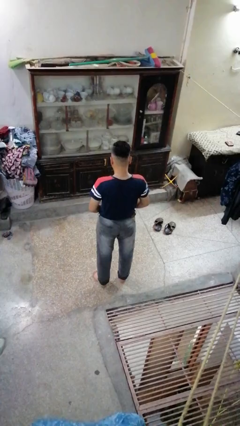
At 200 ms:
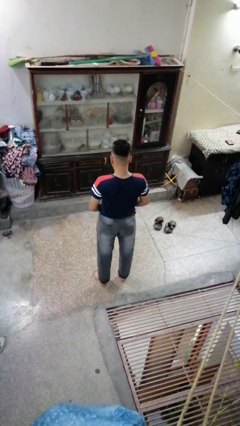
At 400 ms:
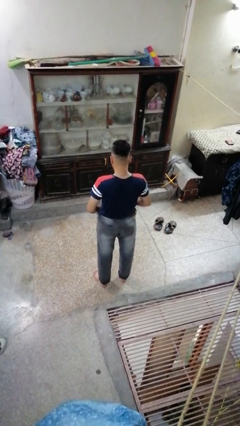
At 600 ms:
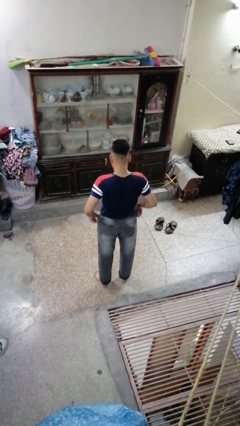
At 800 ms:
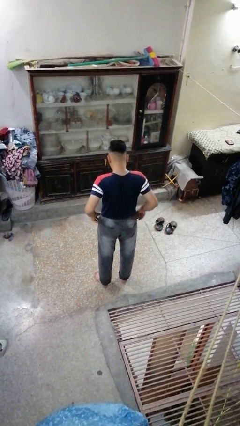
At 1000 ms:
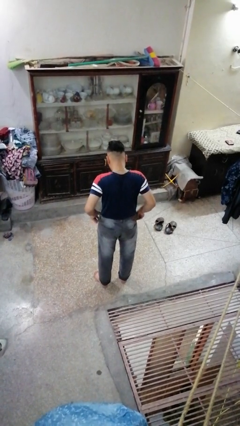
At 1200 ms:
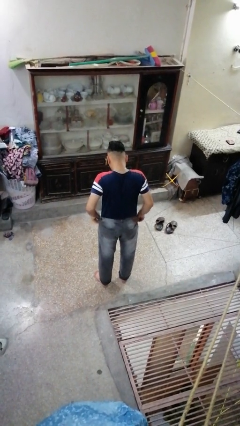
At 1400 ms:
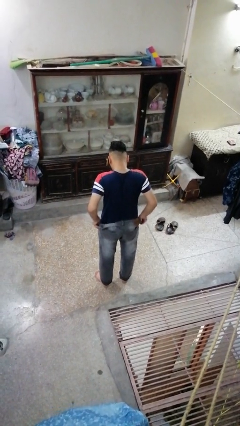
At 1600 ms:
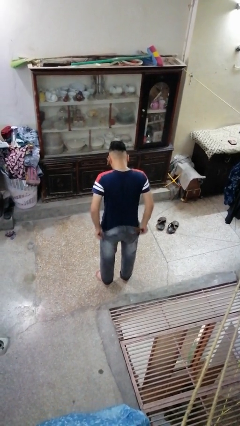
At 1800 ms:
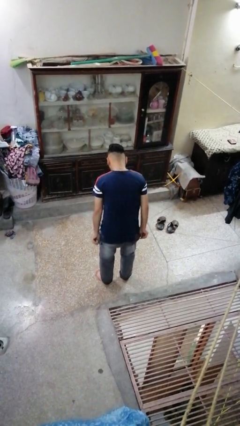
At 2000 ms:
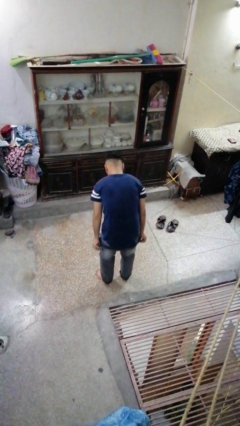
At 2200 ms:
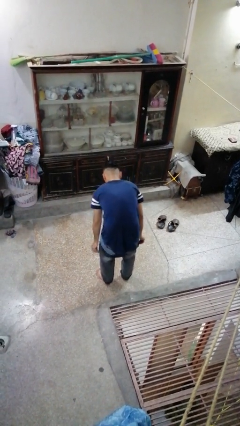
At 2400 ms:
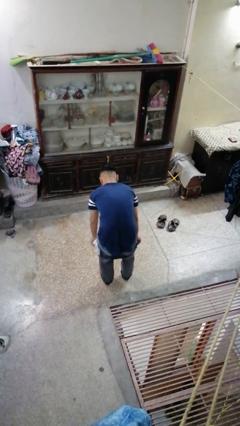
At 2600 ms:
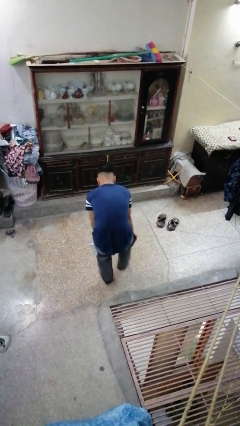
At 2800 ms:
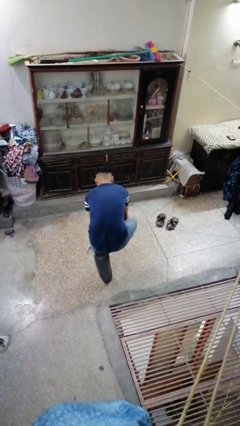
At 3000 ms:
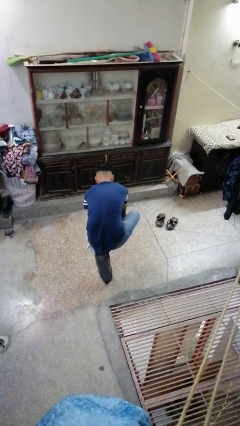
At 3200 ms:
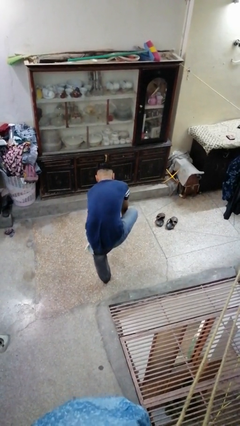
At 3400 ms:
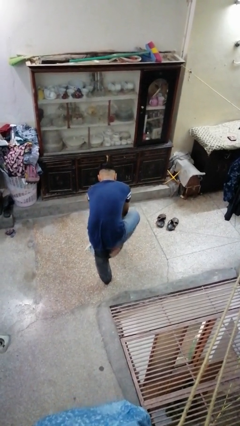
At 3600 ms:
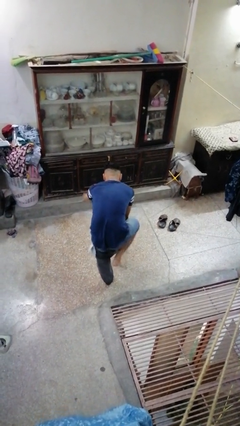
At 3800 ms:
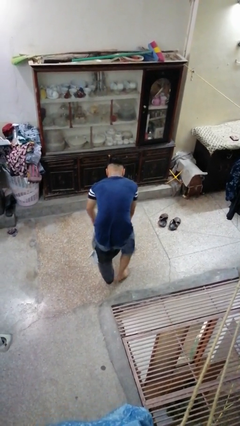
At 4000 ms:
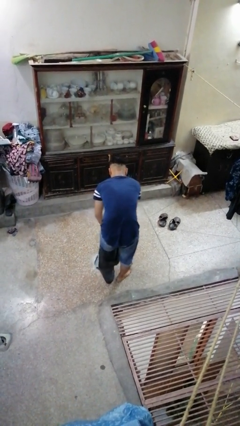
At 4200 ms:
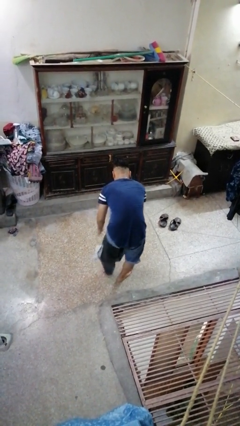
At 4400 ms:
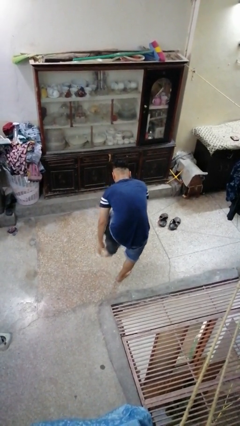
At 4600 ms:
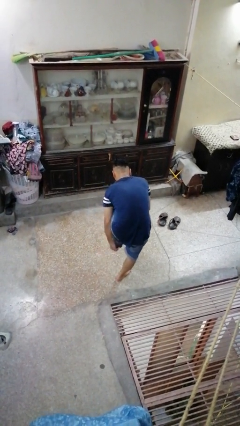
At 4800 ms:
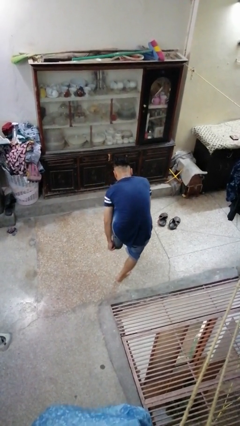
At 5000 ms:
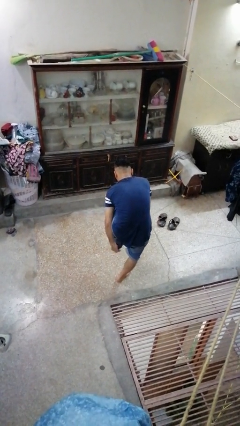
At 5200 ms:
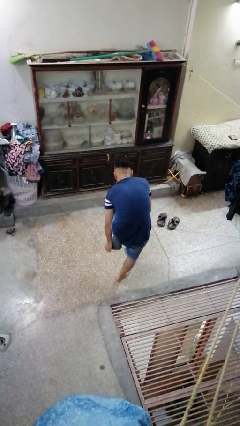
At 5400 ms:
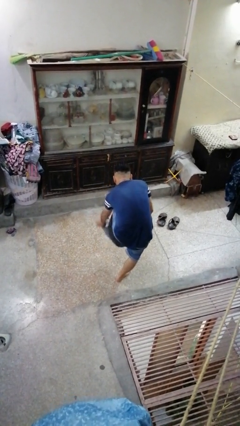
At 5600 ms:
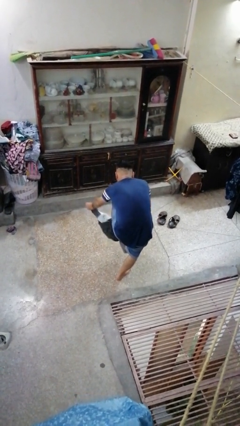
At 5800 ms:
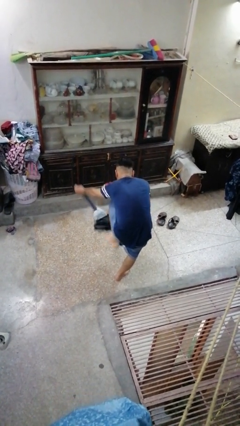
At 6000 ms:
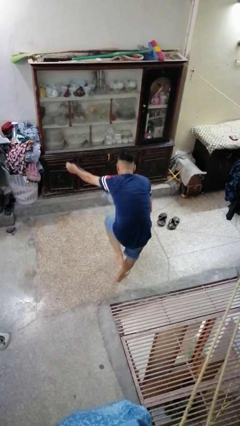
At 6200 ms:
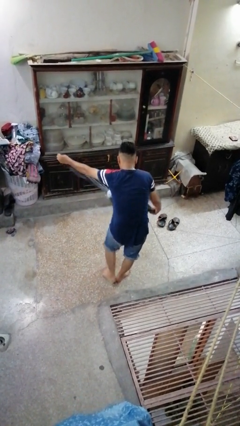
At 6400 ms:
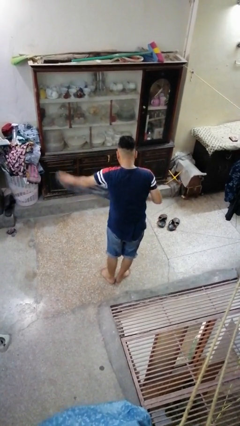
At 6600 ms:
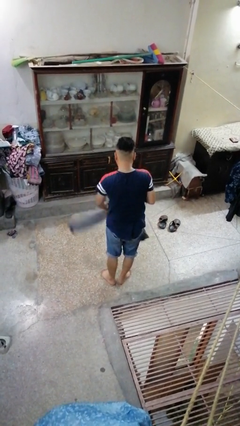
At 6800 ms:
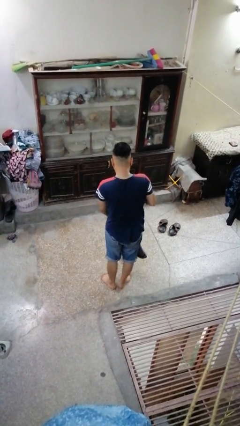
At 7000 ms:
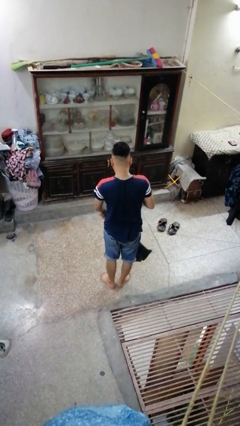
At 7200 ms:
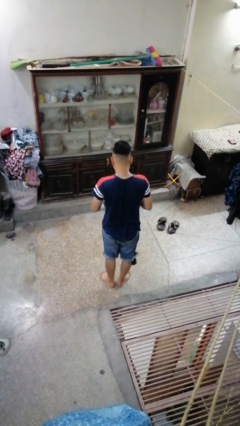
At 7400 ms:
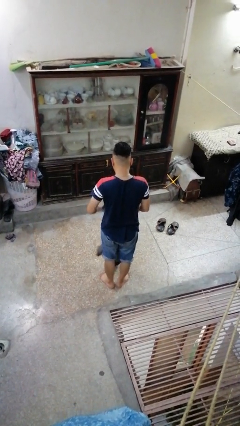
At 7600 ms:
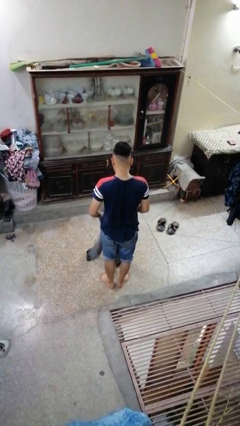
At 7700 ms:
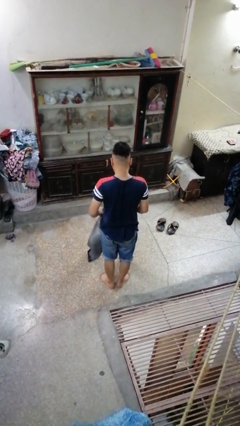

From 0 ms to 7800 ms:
person takes off pants

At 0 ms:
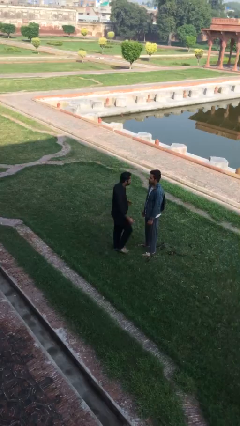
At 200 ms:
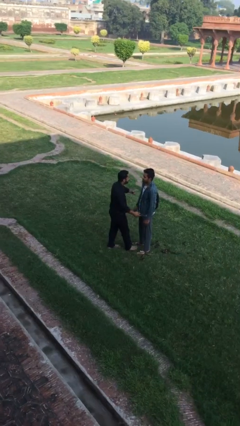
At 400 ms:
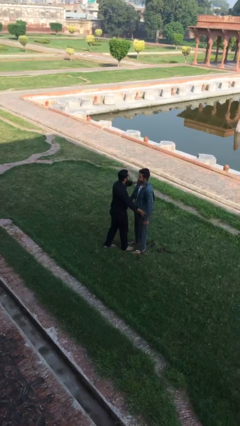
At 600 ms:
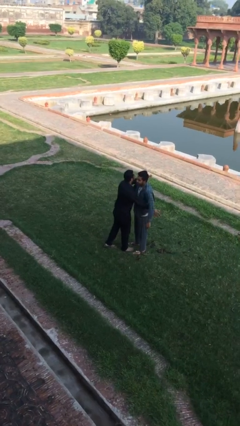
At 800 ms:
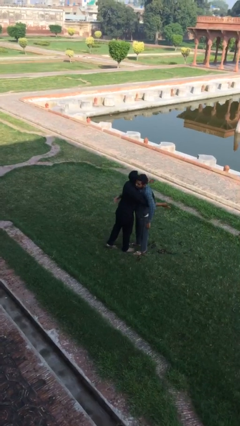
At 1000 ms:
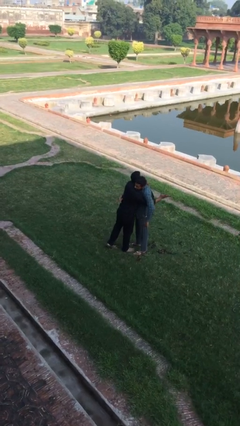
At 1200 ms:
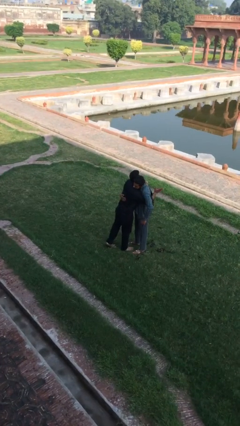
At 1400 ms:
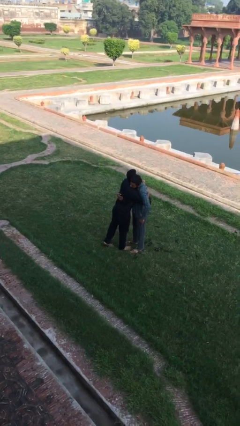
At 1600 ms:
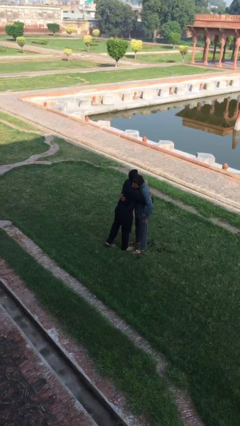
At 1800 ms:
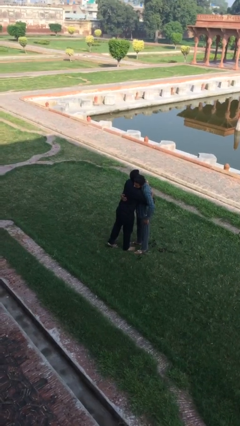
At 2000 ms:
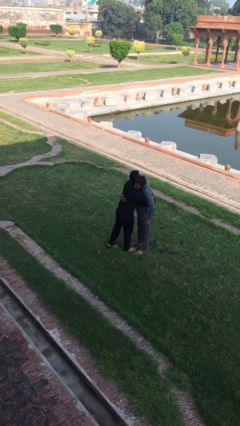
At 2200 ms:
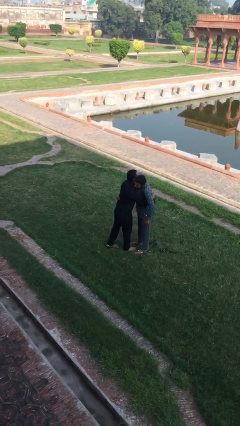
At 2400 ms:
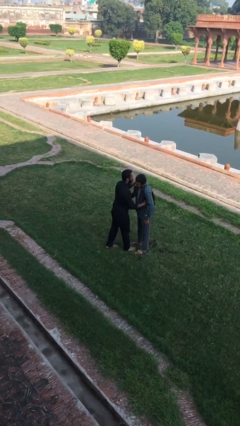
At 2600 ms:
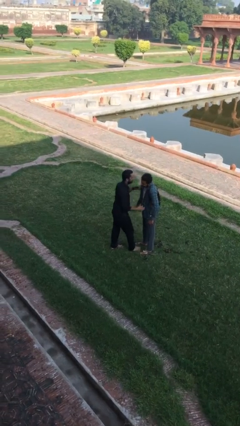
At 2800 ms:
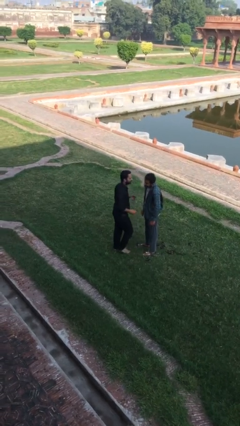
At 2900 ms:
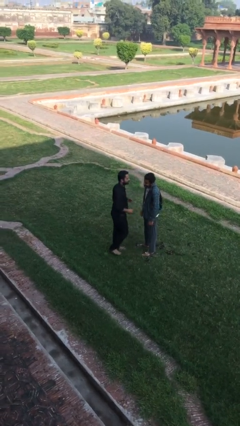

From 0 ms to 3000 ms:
person embraces person

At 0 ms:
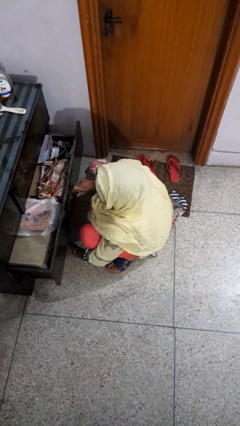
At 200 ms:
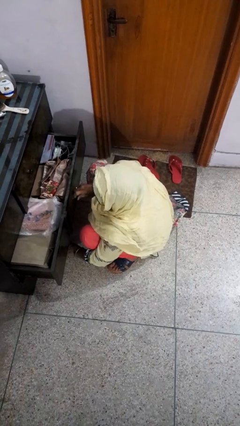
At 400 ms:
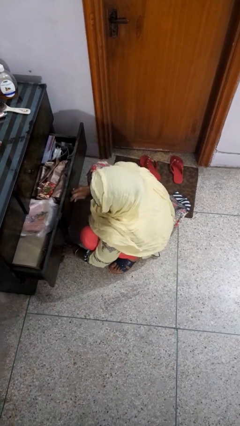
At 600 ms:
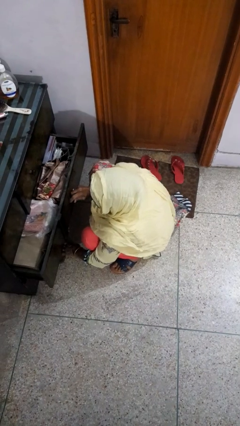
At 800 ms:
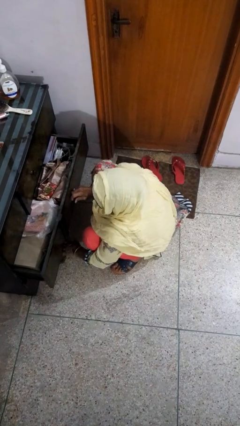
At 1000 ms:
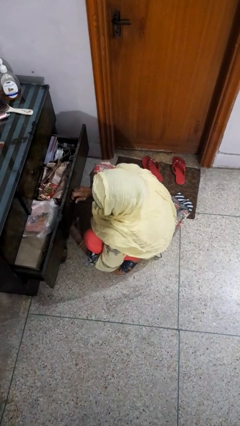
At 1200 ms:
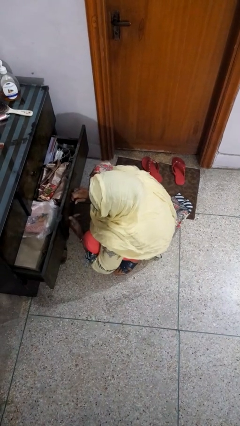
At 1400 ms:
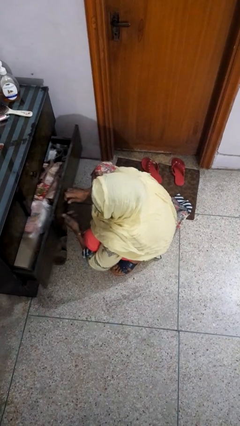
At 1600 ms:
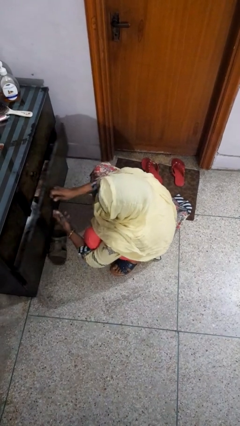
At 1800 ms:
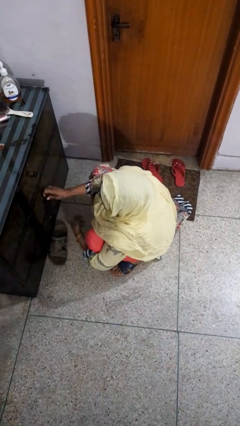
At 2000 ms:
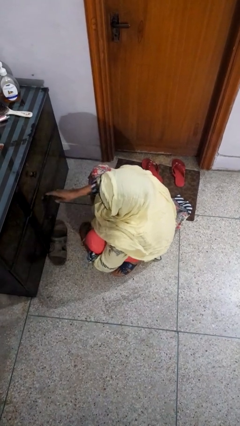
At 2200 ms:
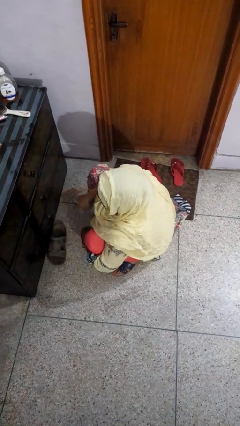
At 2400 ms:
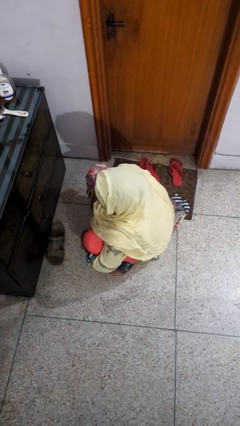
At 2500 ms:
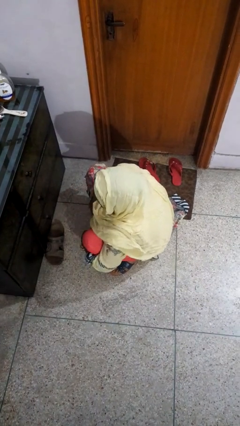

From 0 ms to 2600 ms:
person closes dresser drawer

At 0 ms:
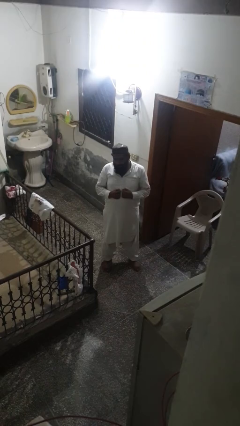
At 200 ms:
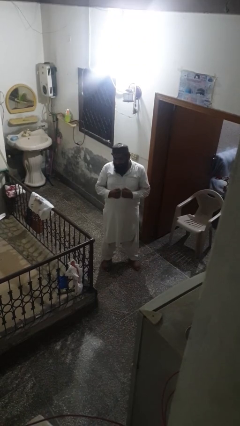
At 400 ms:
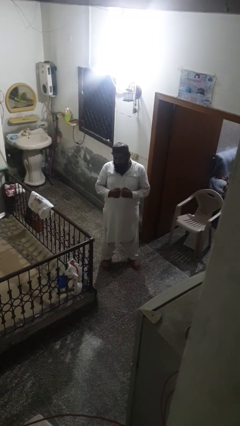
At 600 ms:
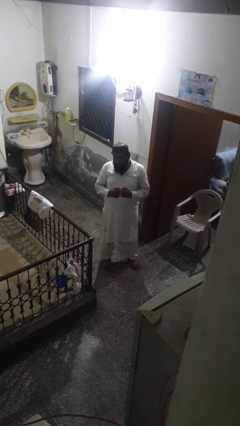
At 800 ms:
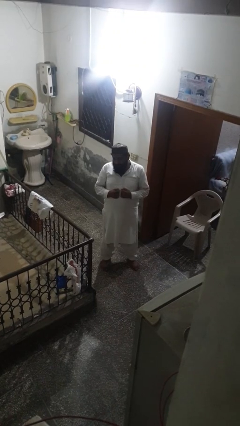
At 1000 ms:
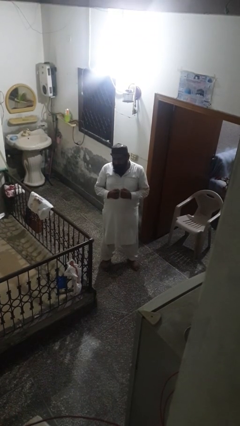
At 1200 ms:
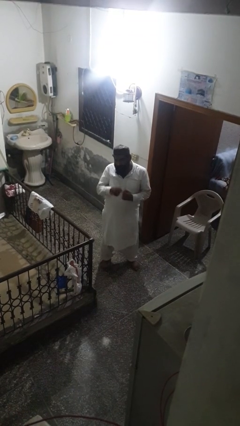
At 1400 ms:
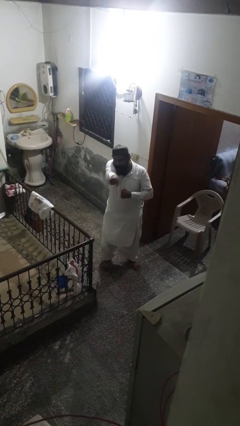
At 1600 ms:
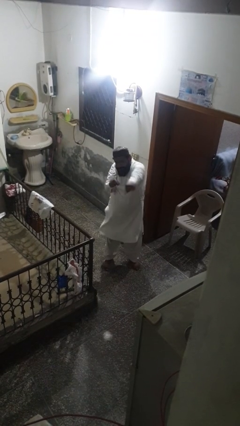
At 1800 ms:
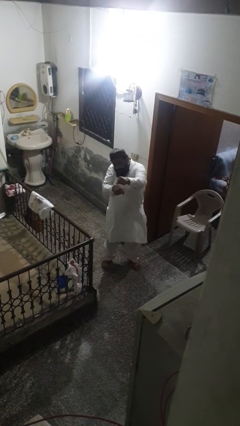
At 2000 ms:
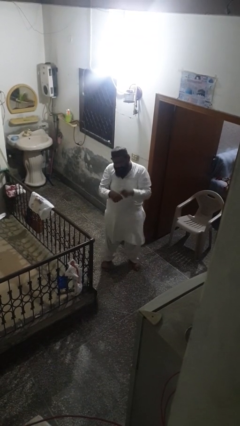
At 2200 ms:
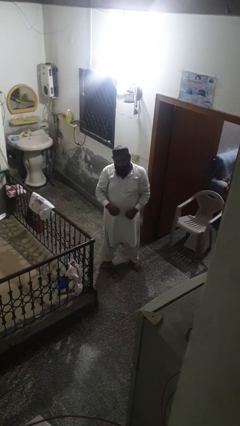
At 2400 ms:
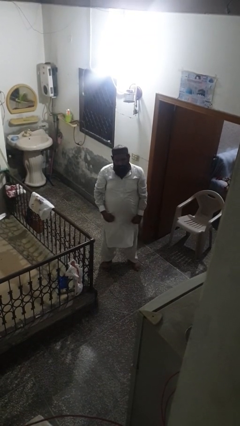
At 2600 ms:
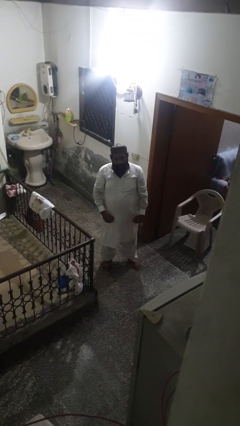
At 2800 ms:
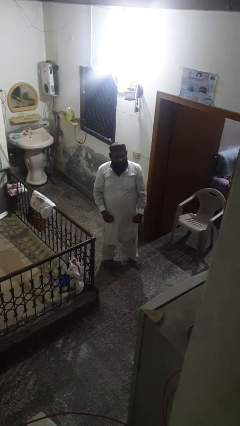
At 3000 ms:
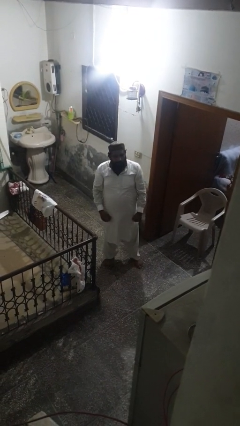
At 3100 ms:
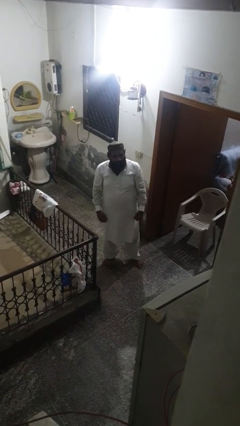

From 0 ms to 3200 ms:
person punches

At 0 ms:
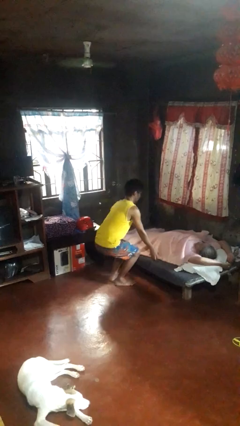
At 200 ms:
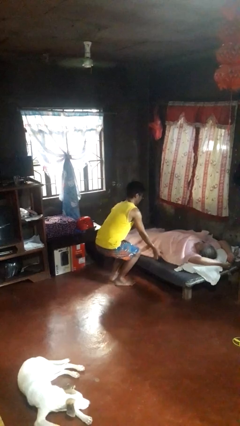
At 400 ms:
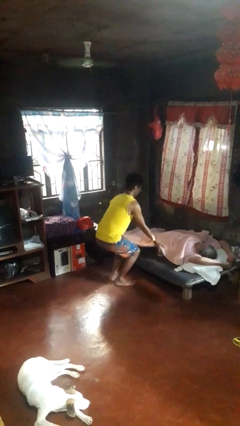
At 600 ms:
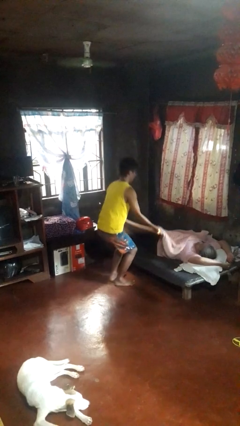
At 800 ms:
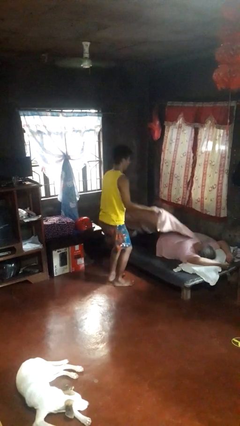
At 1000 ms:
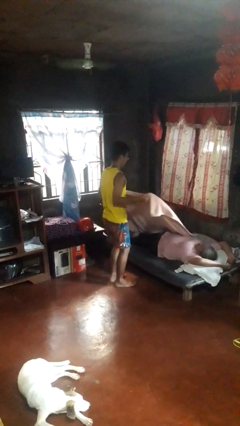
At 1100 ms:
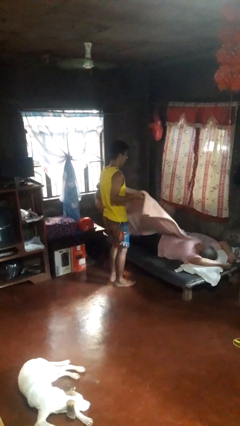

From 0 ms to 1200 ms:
person uncovers friend with blanket
